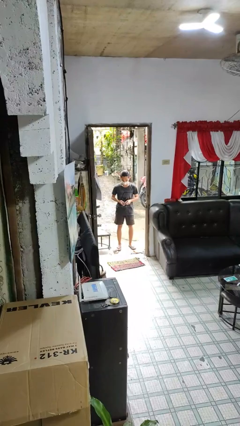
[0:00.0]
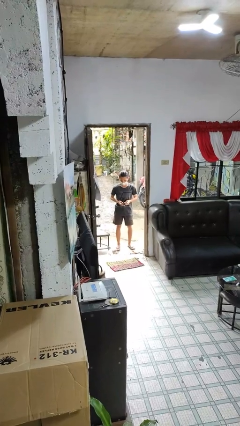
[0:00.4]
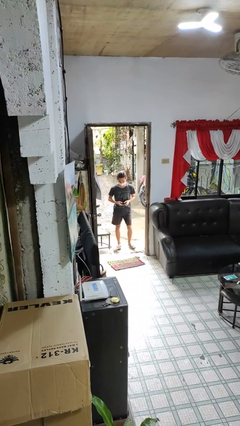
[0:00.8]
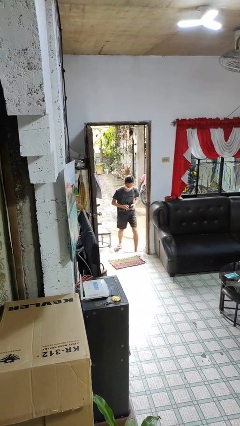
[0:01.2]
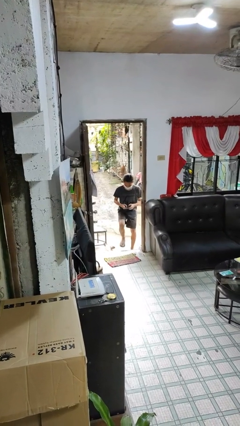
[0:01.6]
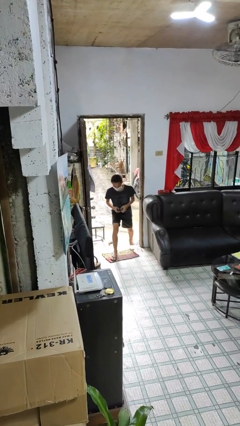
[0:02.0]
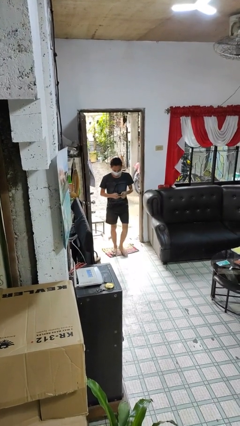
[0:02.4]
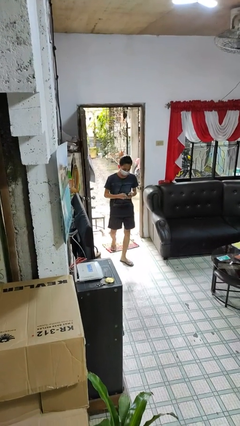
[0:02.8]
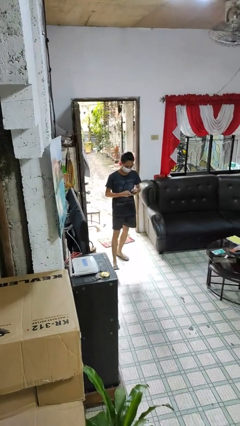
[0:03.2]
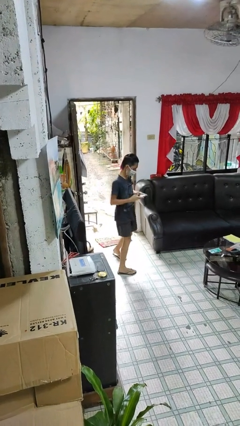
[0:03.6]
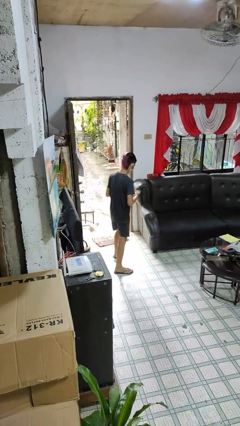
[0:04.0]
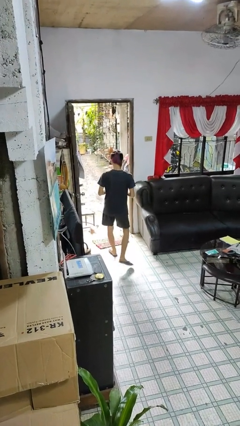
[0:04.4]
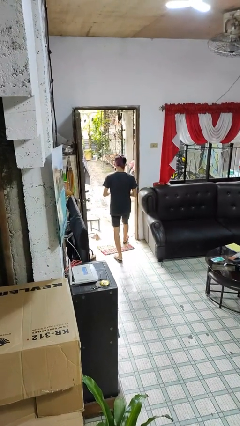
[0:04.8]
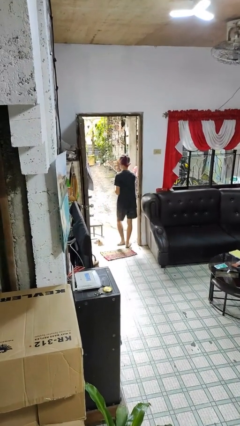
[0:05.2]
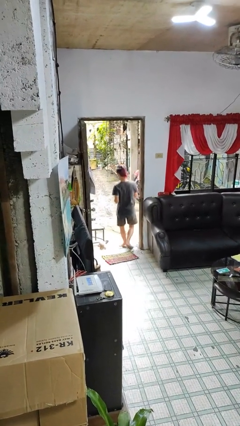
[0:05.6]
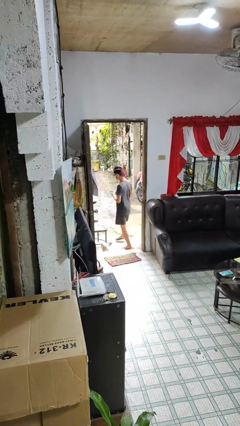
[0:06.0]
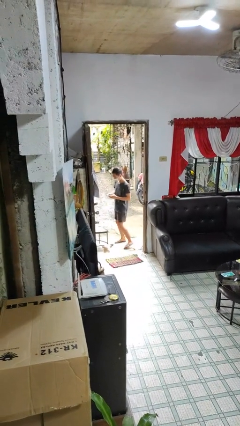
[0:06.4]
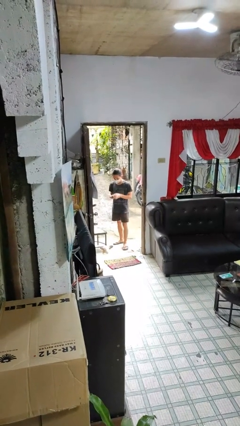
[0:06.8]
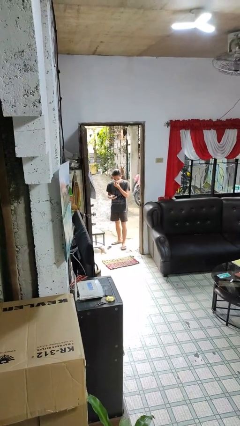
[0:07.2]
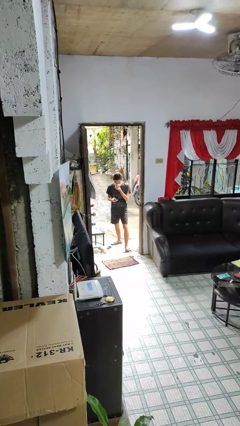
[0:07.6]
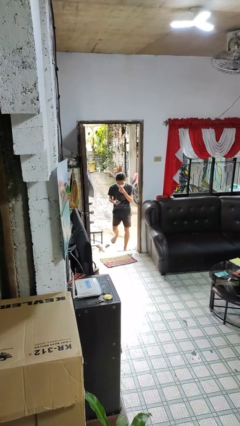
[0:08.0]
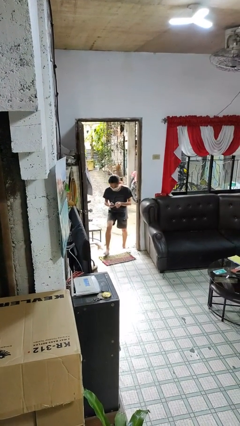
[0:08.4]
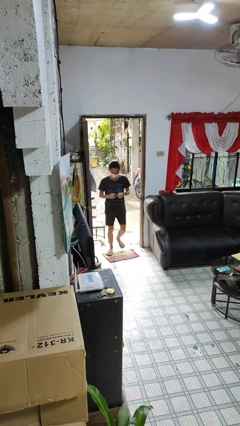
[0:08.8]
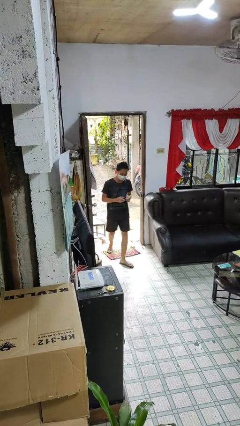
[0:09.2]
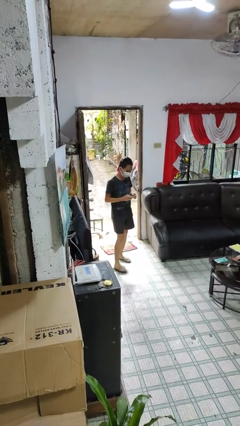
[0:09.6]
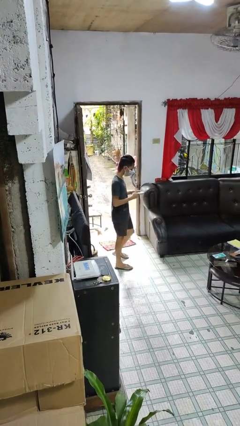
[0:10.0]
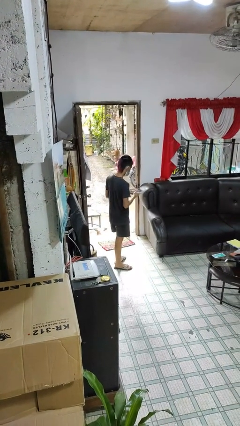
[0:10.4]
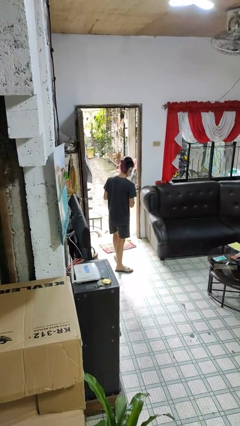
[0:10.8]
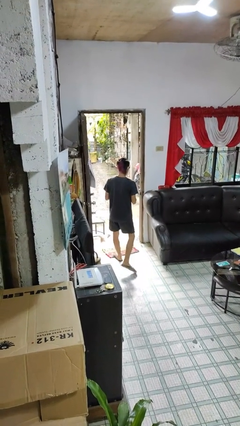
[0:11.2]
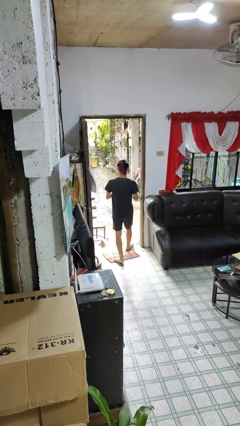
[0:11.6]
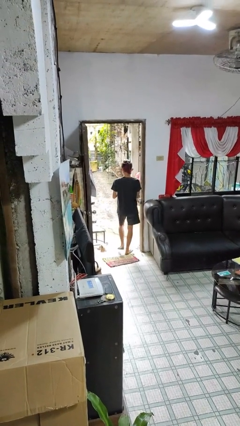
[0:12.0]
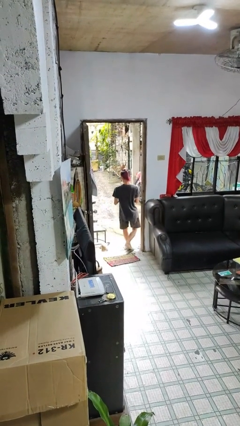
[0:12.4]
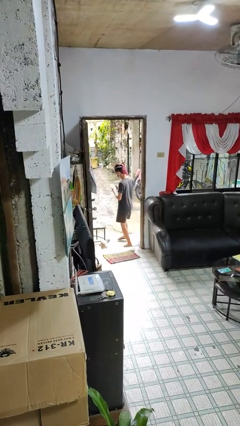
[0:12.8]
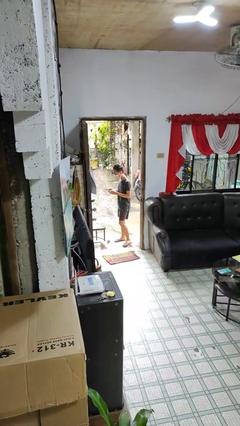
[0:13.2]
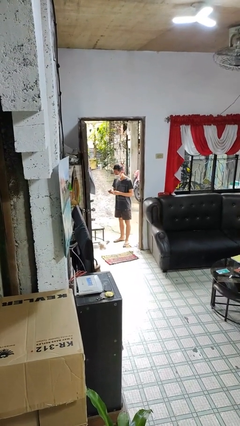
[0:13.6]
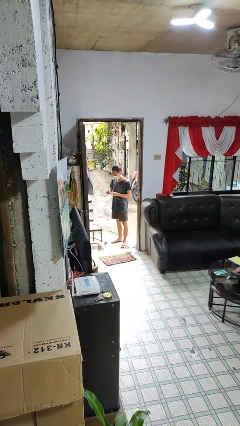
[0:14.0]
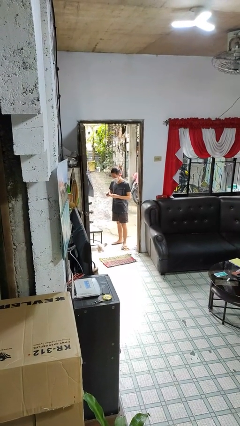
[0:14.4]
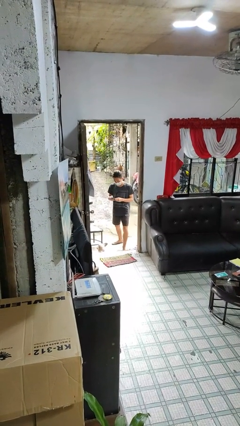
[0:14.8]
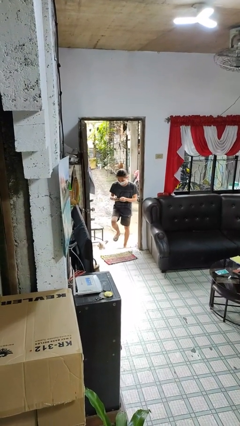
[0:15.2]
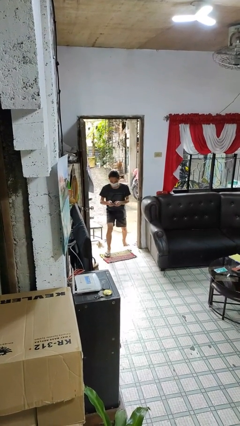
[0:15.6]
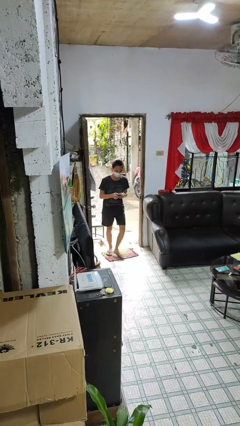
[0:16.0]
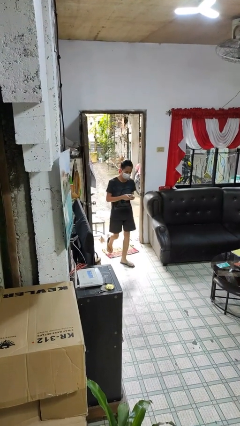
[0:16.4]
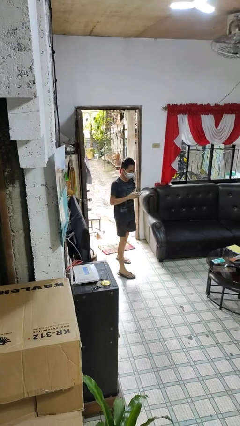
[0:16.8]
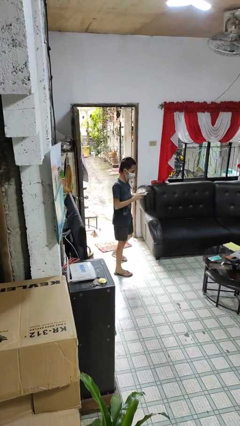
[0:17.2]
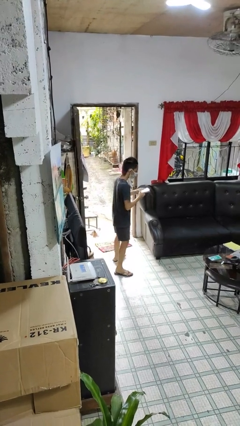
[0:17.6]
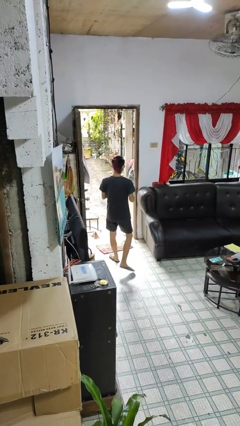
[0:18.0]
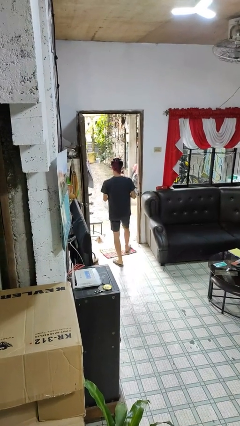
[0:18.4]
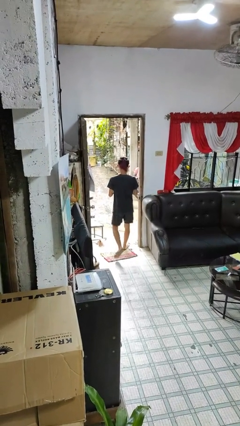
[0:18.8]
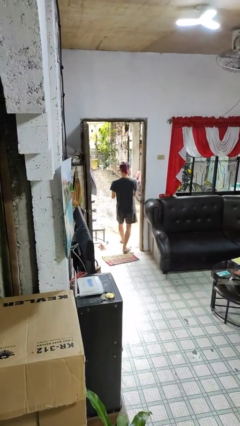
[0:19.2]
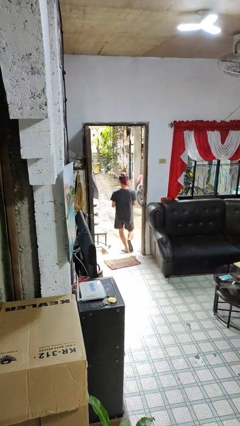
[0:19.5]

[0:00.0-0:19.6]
person texts on phone

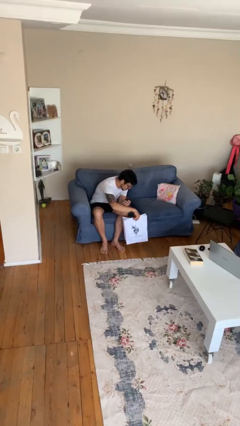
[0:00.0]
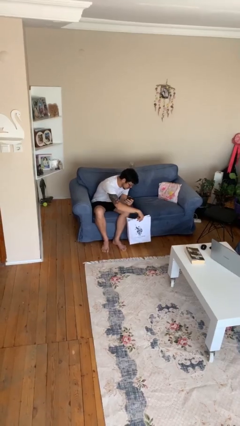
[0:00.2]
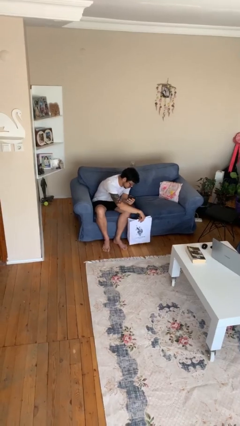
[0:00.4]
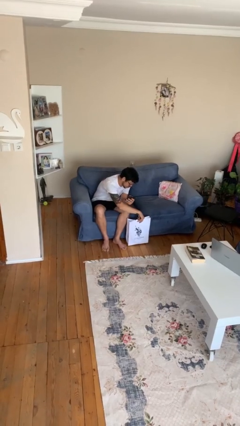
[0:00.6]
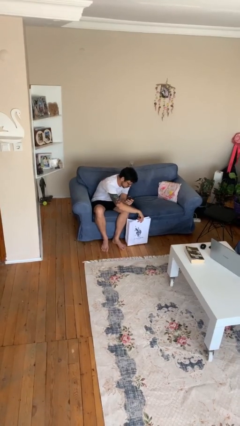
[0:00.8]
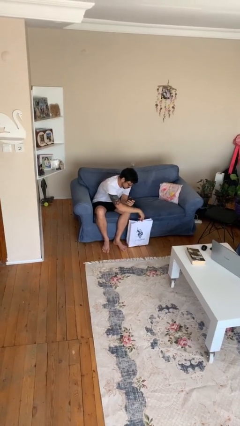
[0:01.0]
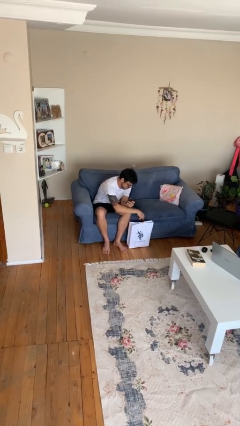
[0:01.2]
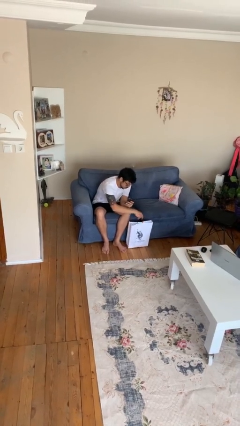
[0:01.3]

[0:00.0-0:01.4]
person puts down object on floor

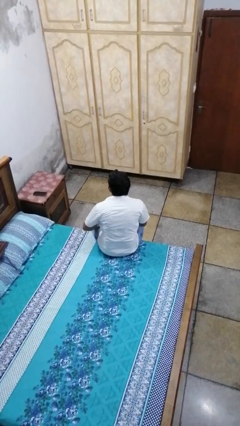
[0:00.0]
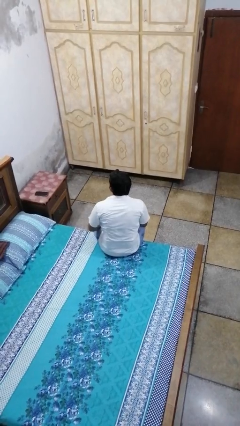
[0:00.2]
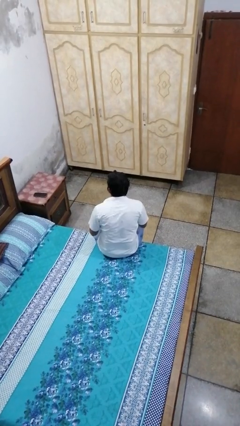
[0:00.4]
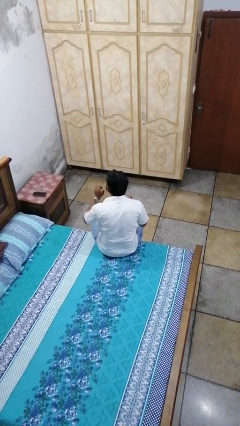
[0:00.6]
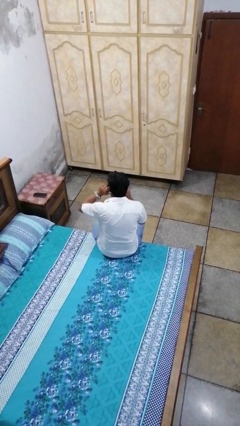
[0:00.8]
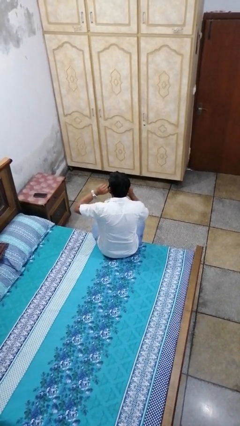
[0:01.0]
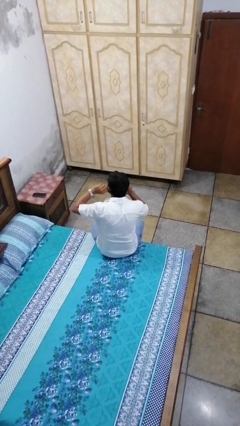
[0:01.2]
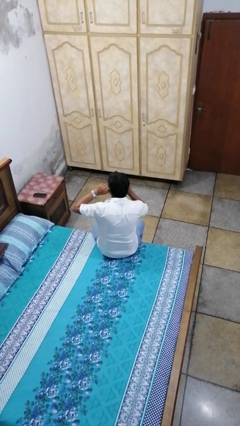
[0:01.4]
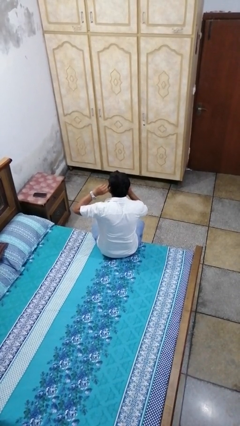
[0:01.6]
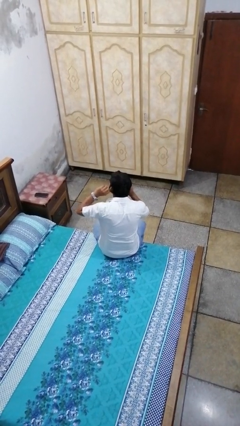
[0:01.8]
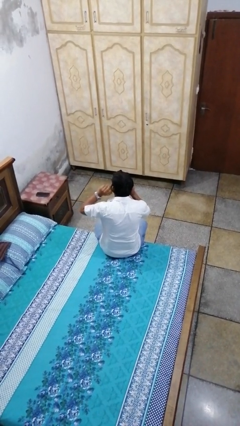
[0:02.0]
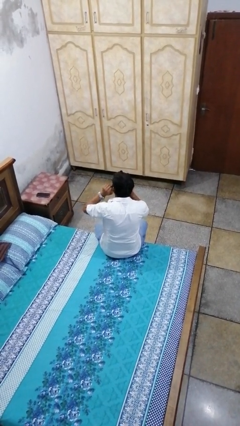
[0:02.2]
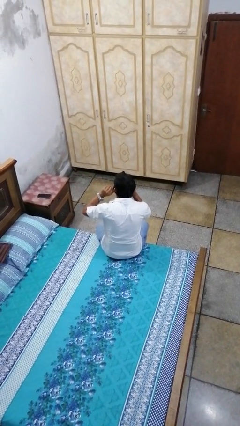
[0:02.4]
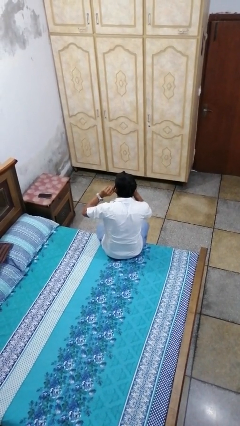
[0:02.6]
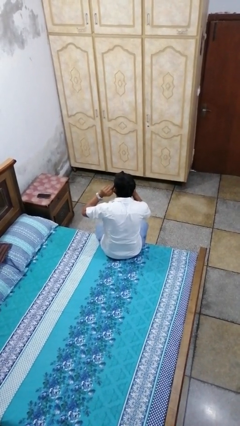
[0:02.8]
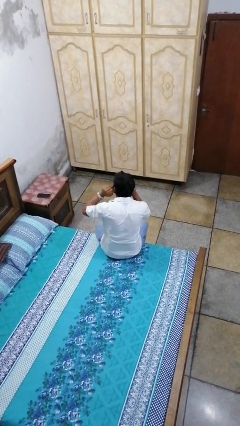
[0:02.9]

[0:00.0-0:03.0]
person touches earlobe

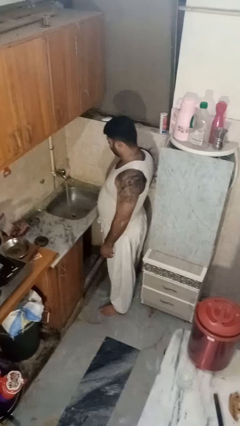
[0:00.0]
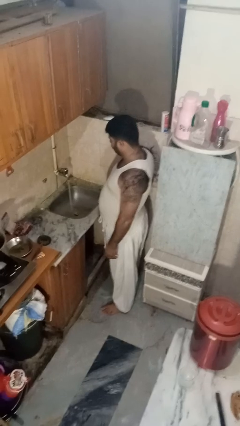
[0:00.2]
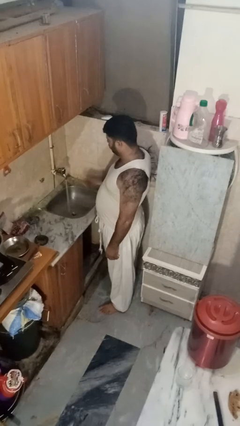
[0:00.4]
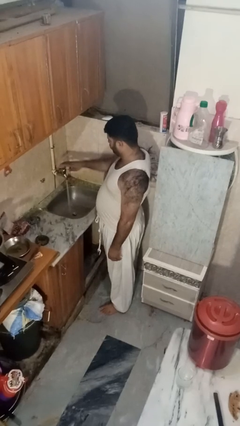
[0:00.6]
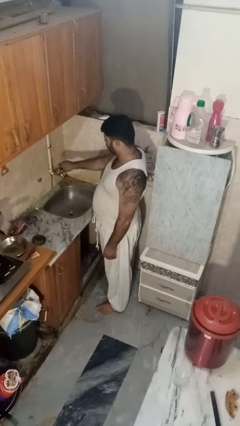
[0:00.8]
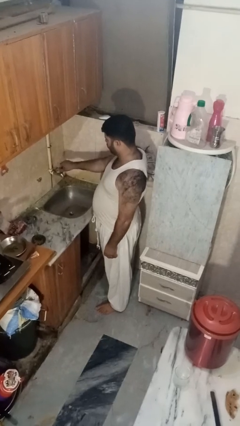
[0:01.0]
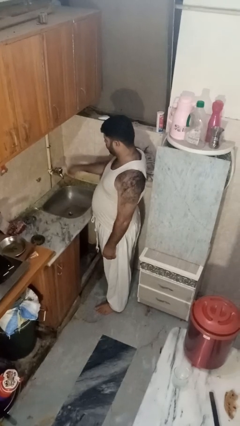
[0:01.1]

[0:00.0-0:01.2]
person turns off faucet

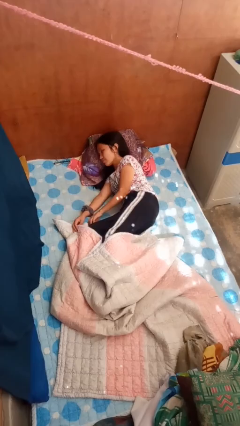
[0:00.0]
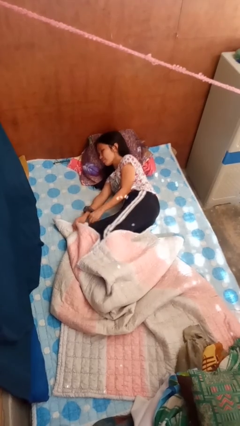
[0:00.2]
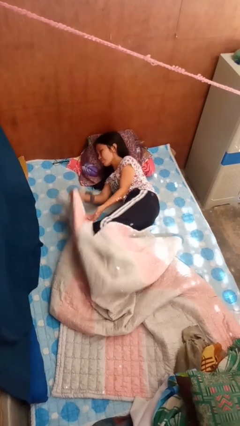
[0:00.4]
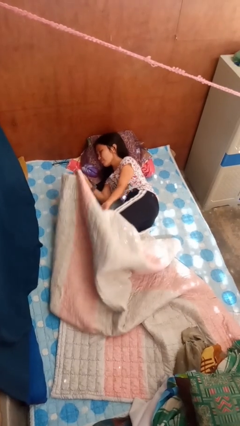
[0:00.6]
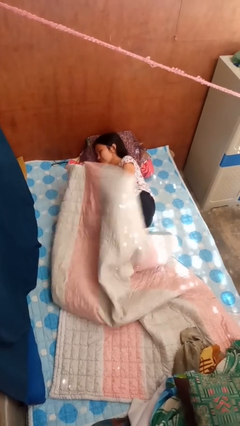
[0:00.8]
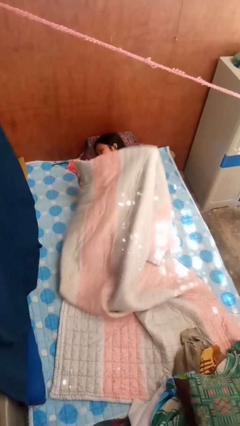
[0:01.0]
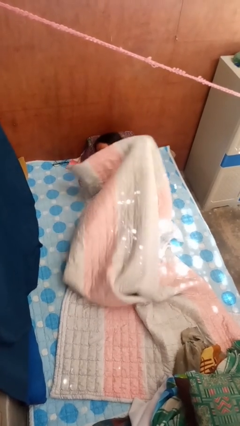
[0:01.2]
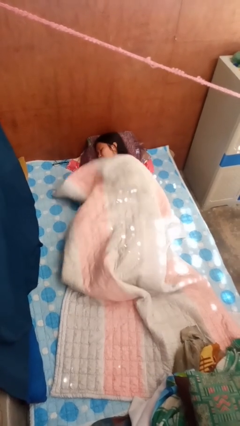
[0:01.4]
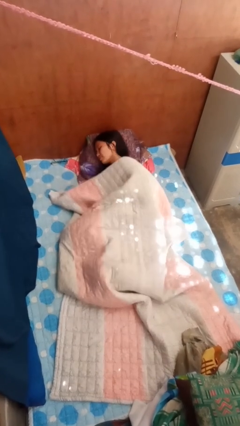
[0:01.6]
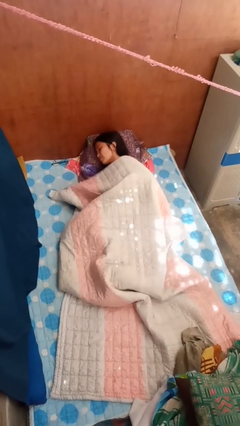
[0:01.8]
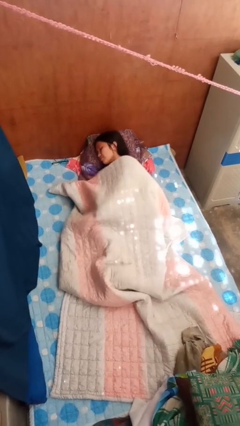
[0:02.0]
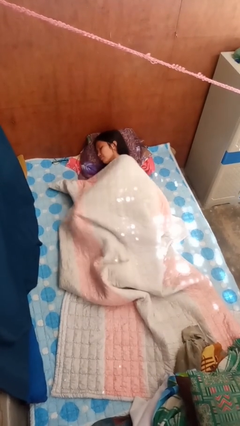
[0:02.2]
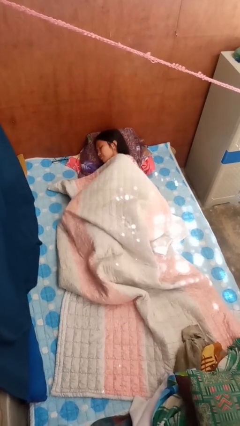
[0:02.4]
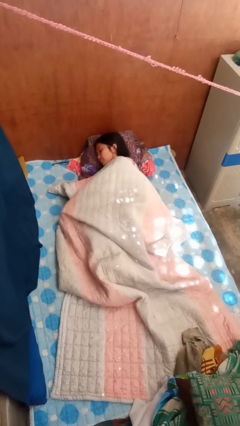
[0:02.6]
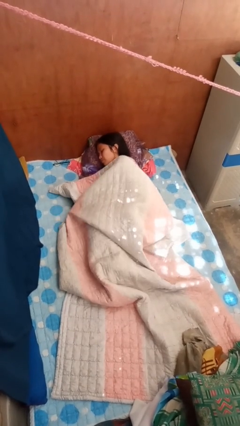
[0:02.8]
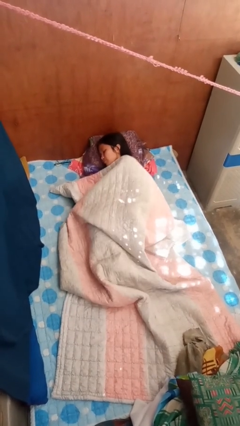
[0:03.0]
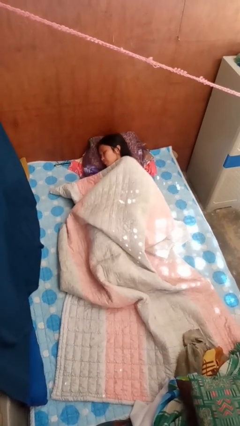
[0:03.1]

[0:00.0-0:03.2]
person covers with bedsheets
